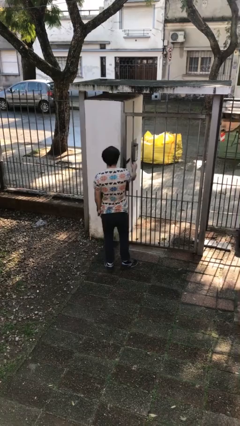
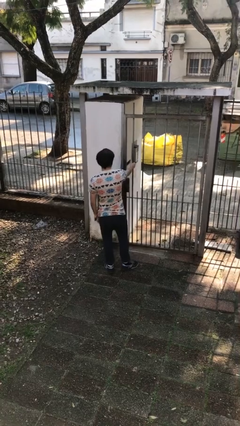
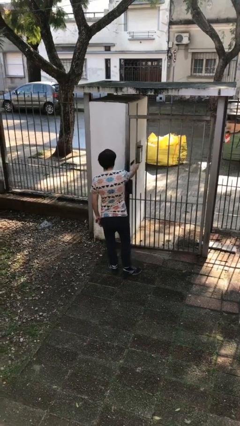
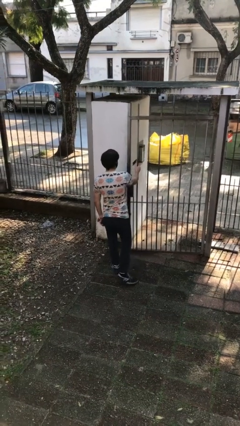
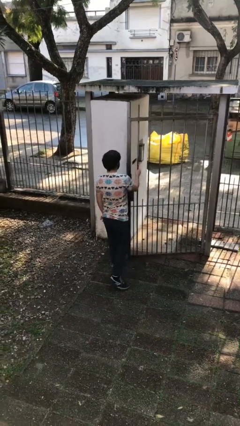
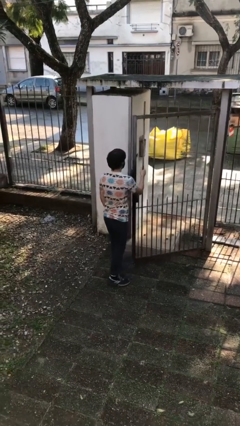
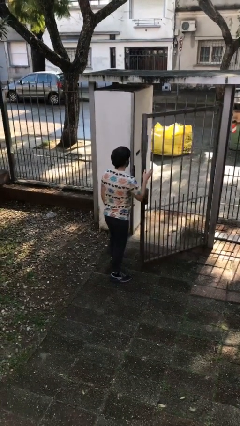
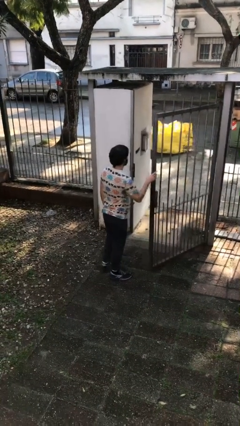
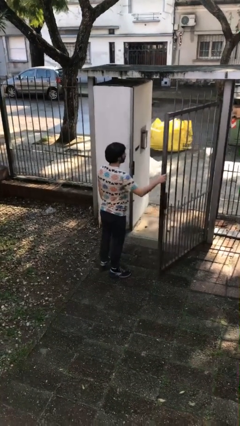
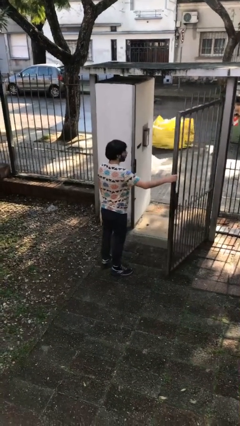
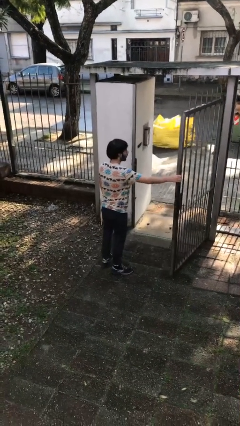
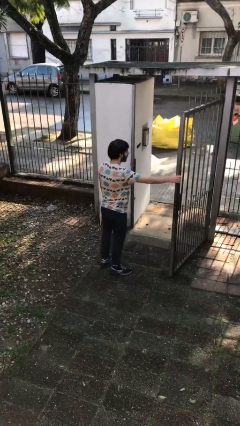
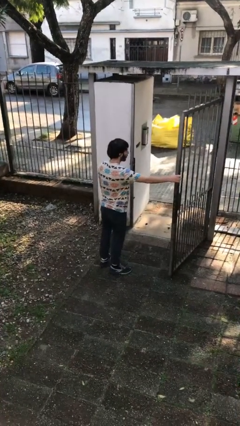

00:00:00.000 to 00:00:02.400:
person opens gate

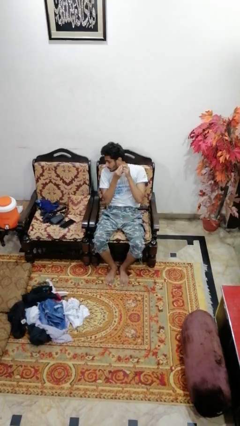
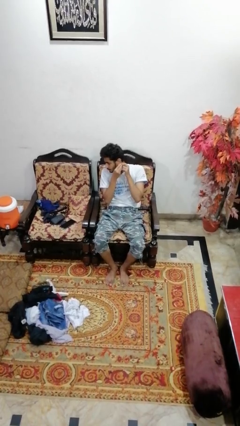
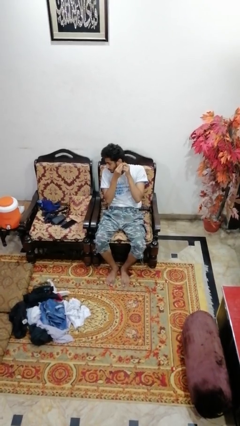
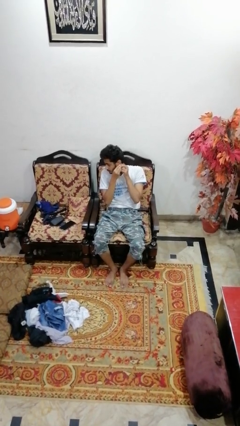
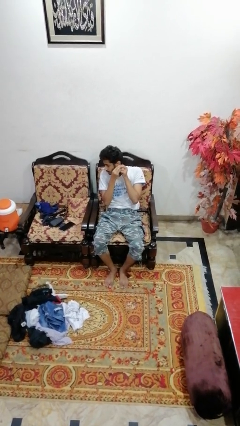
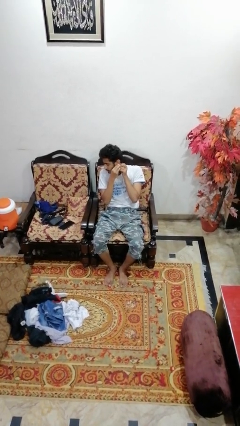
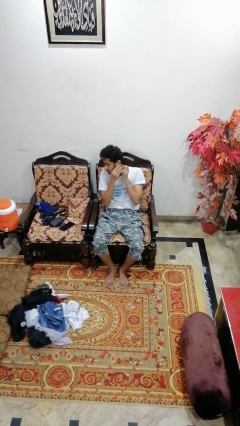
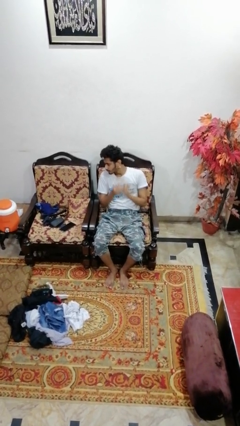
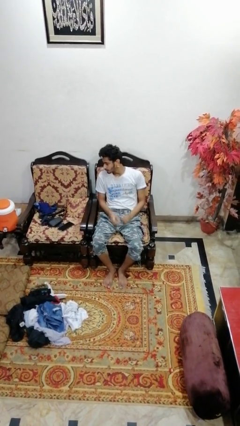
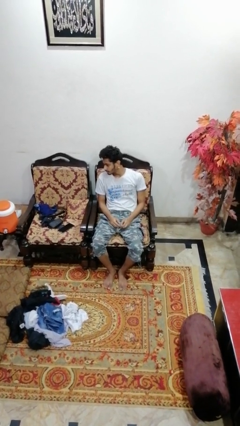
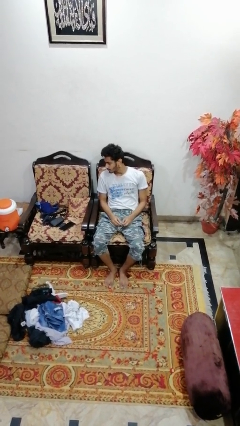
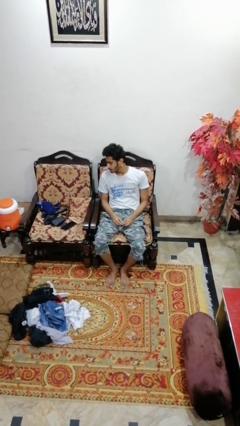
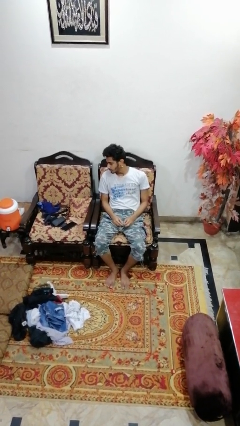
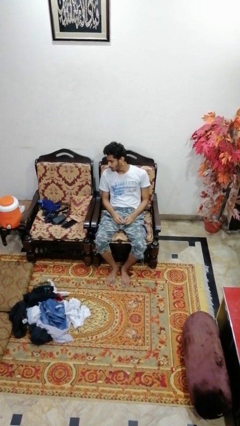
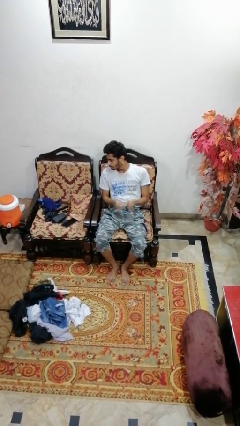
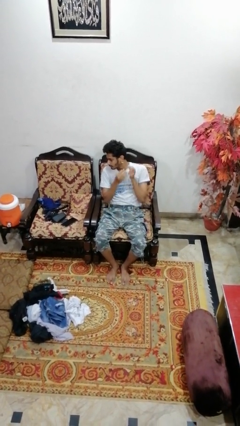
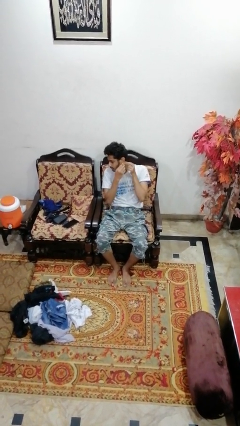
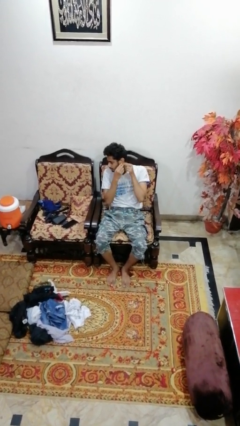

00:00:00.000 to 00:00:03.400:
person puts on earrings

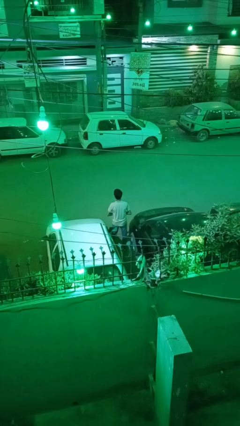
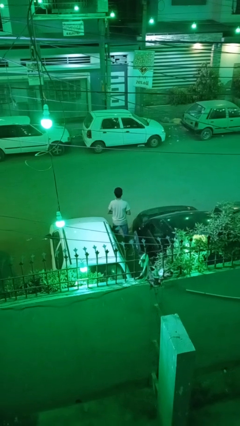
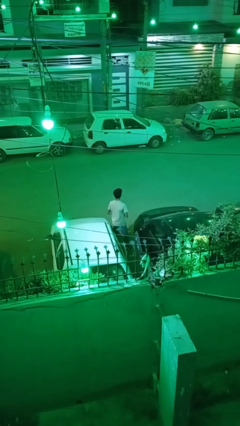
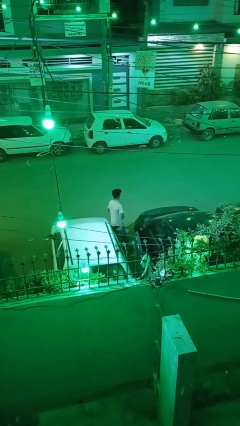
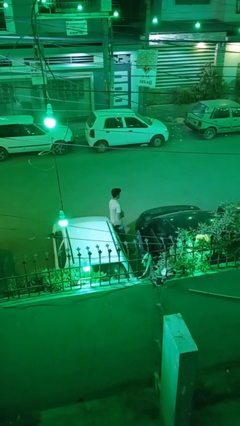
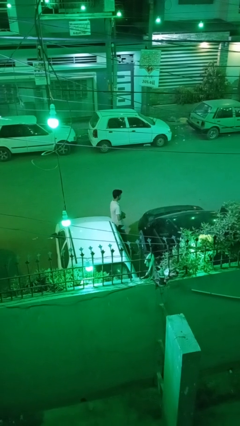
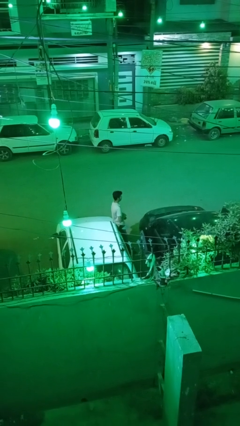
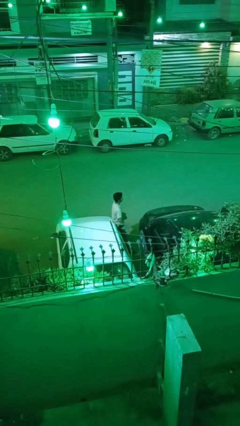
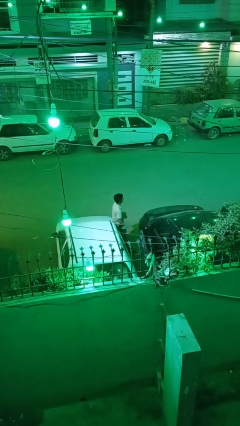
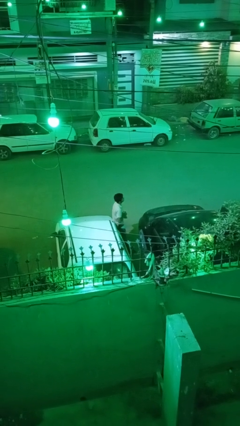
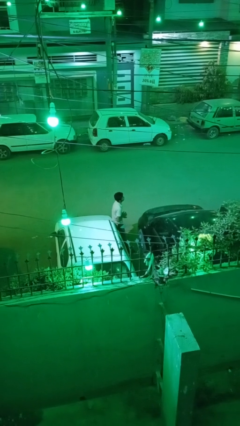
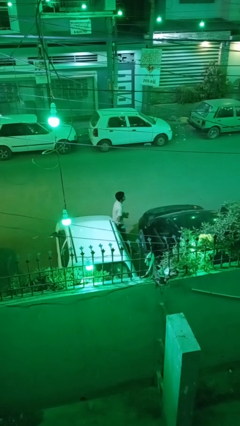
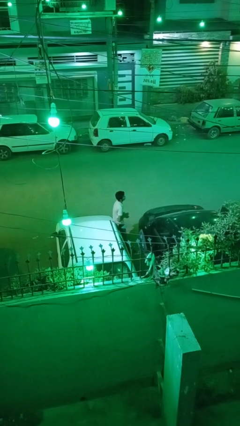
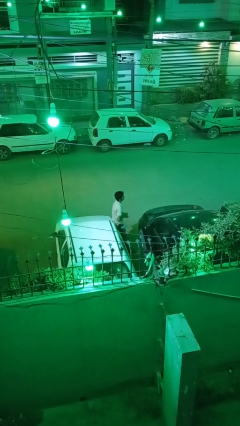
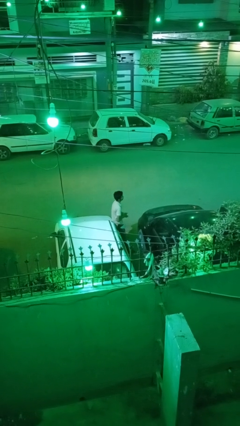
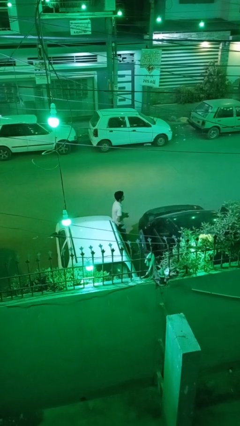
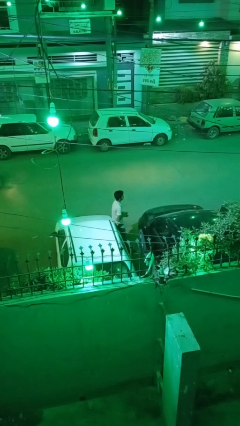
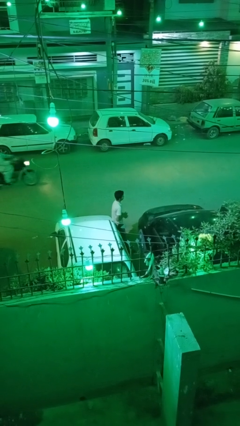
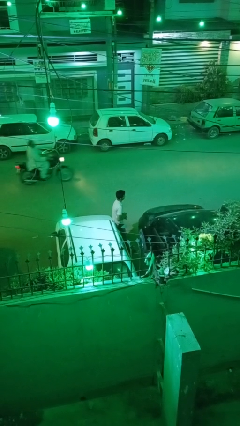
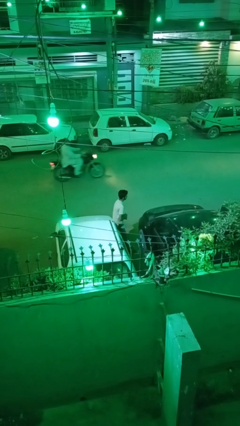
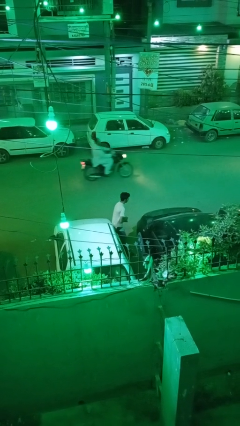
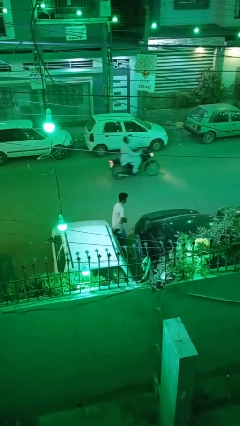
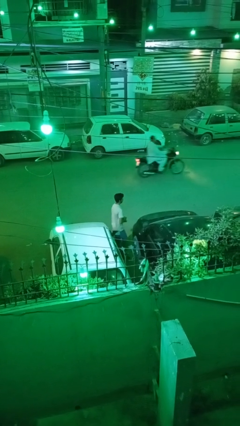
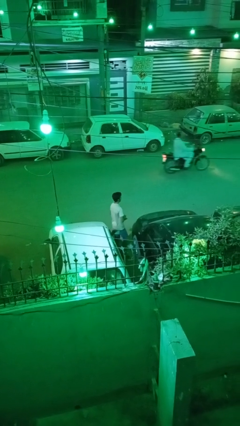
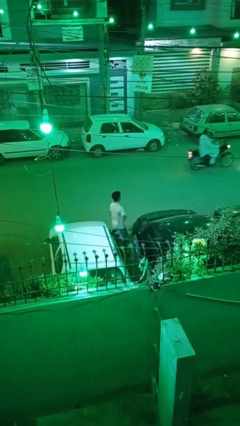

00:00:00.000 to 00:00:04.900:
person leans against car

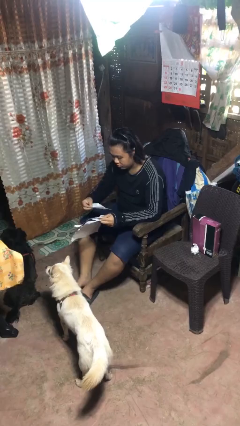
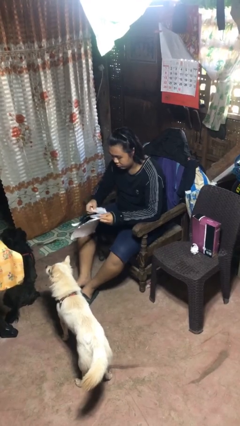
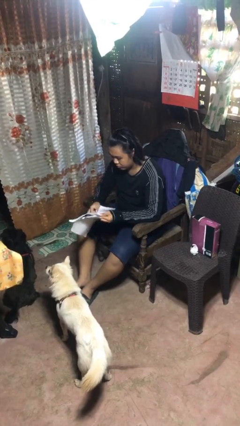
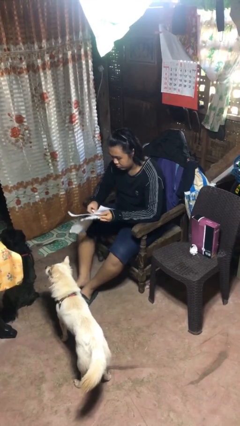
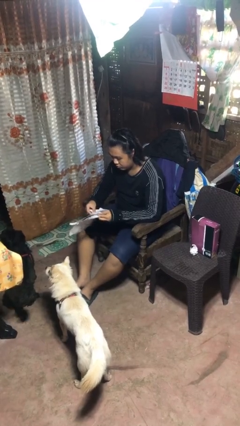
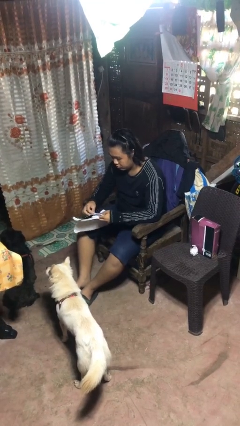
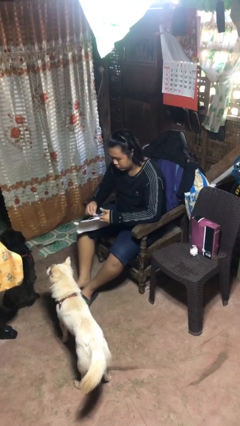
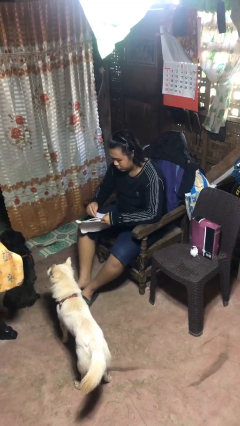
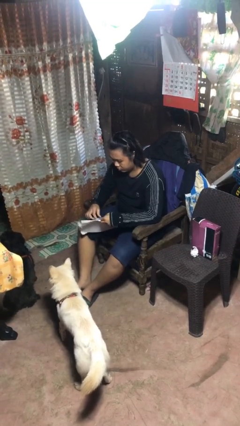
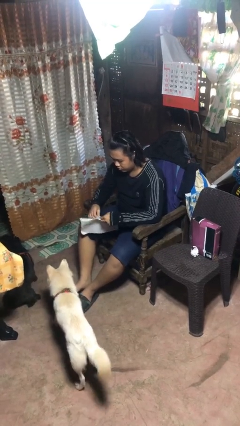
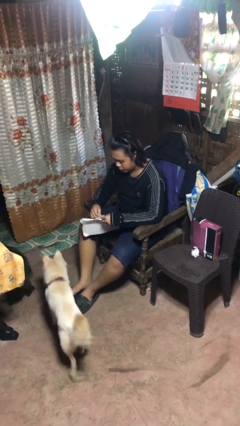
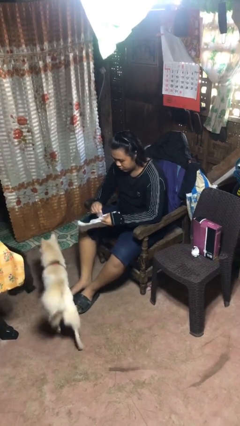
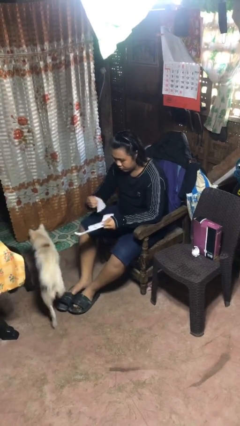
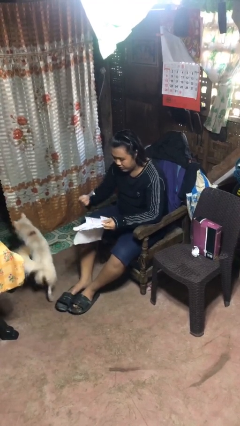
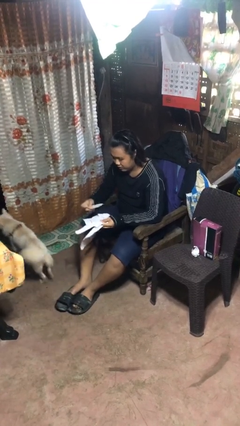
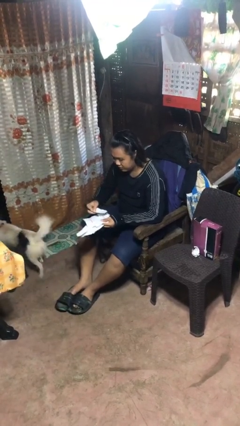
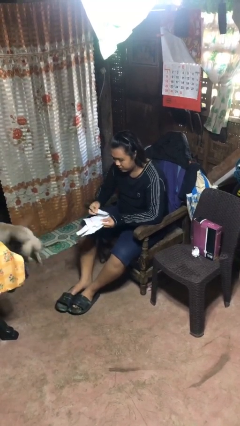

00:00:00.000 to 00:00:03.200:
person tears paper

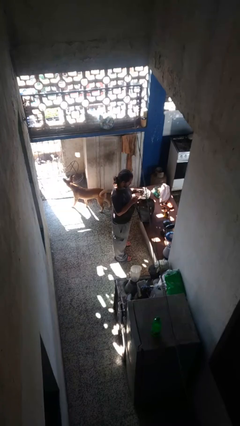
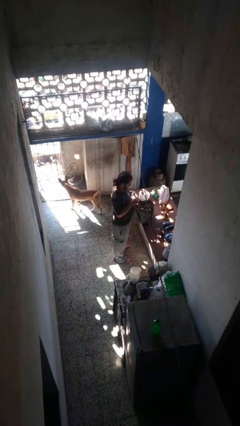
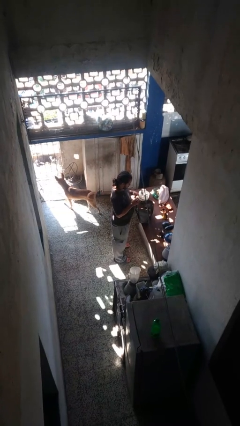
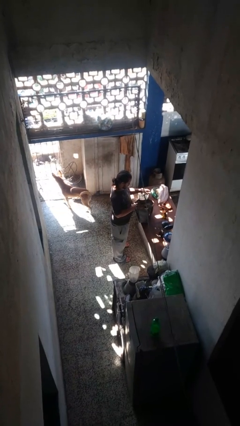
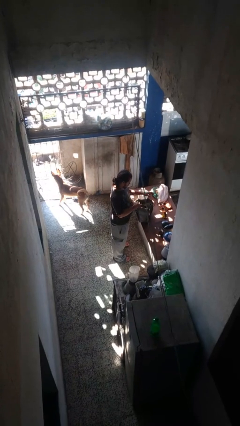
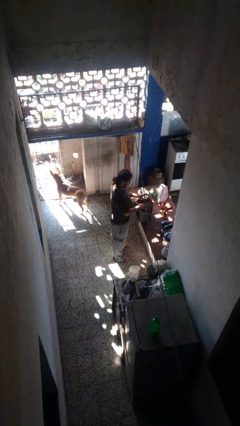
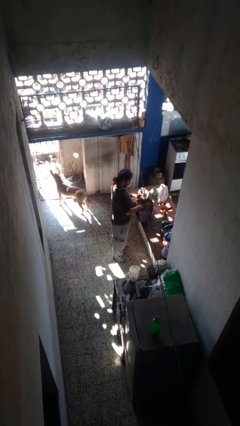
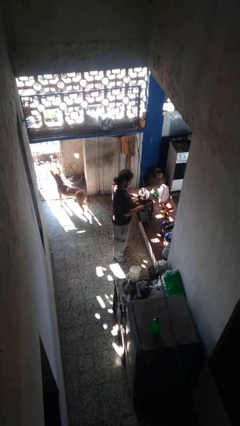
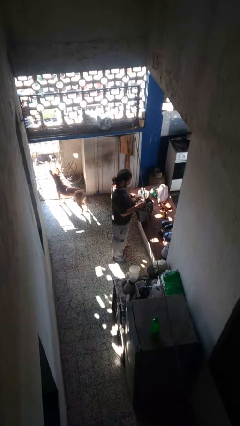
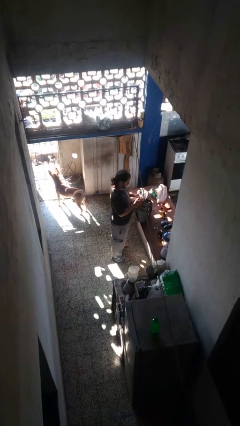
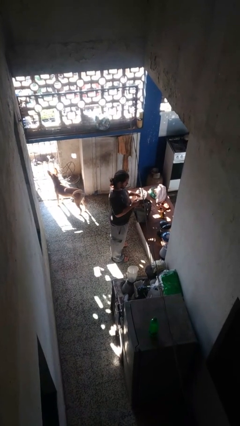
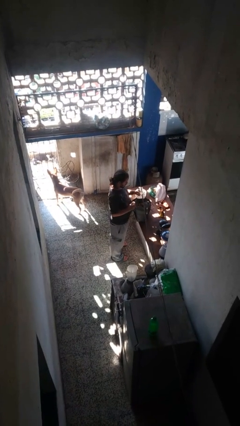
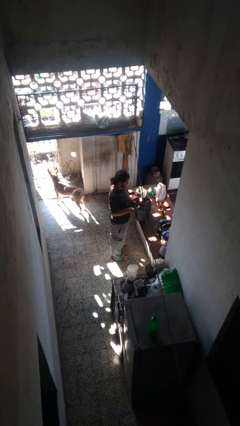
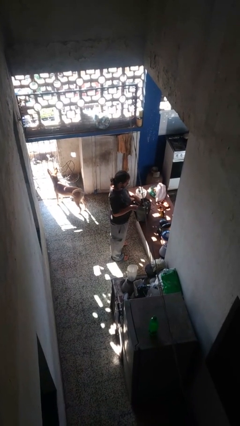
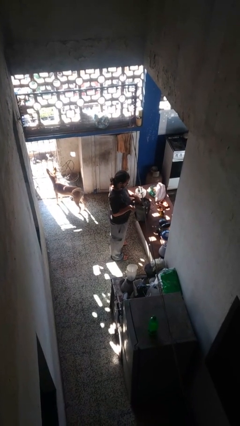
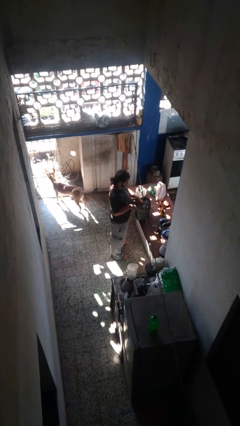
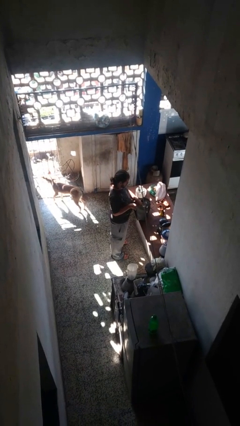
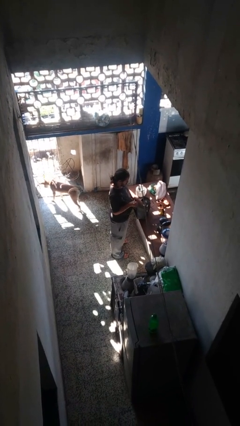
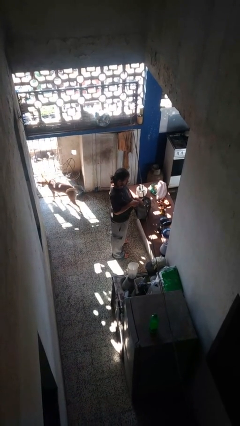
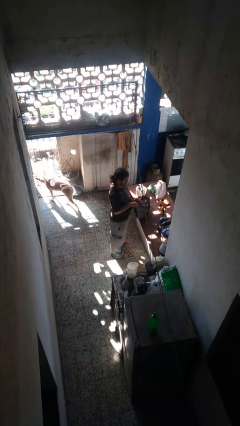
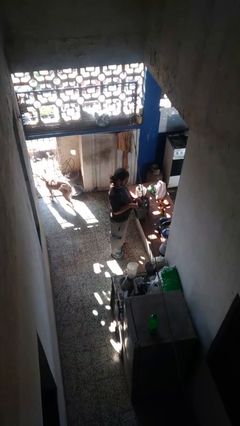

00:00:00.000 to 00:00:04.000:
person searches in purse

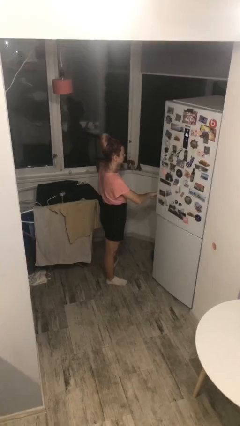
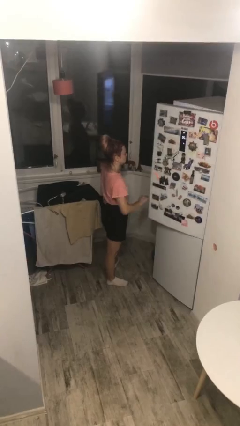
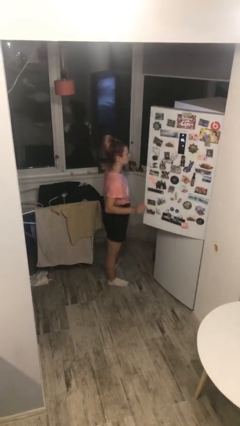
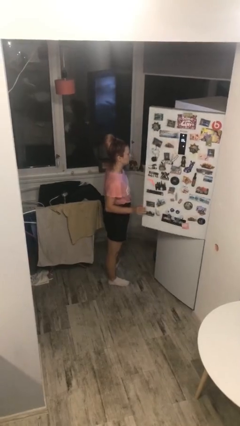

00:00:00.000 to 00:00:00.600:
person opens refrigerator
